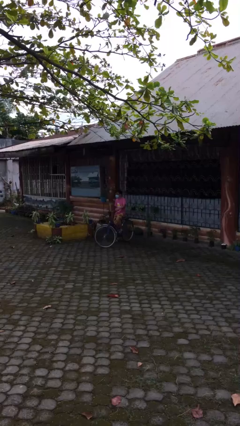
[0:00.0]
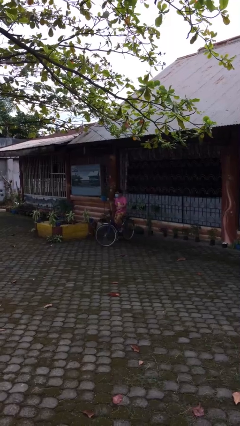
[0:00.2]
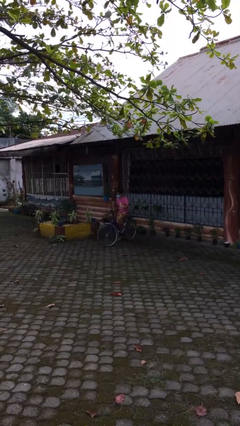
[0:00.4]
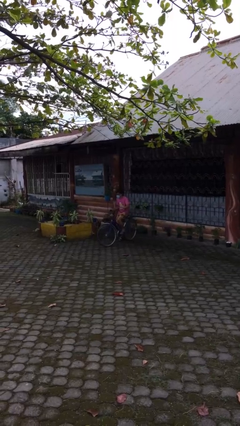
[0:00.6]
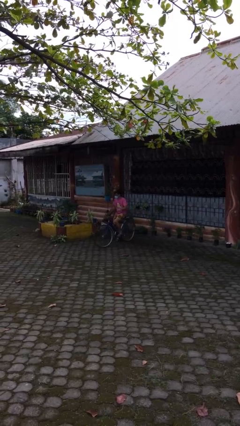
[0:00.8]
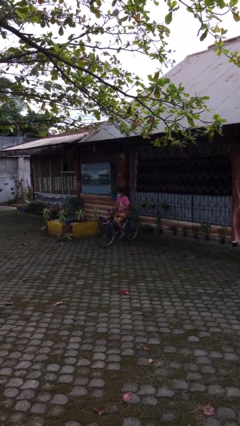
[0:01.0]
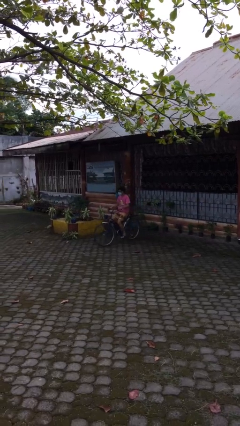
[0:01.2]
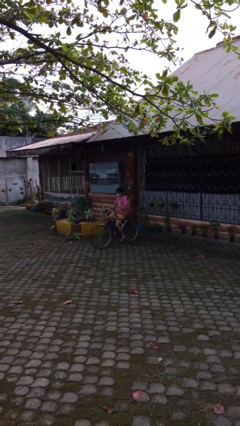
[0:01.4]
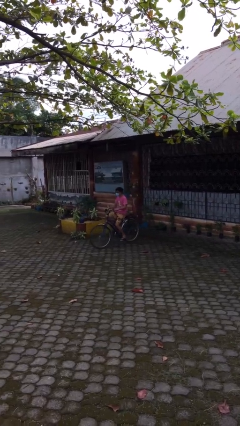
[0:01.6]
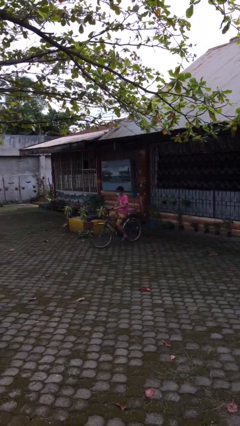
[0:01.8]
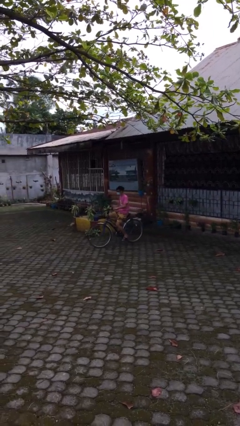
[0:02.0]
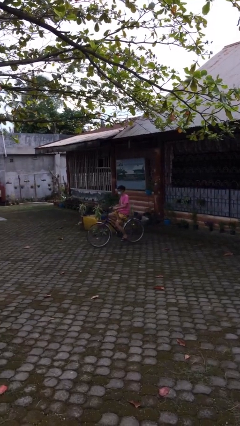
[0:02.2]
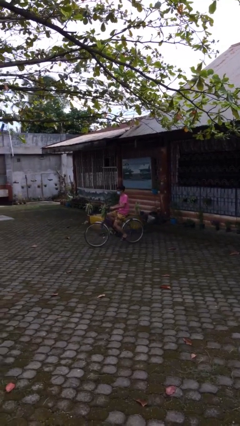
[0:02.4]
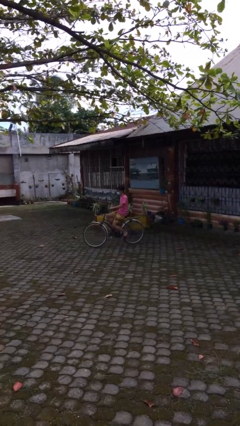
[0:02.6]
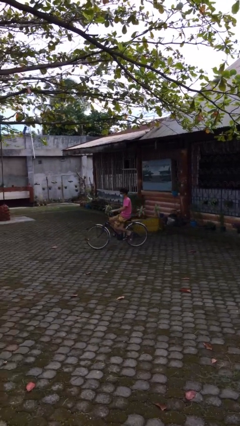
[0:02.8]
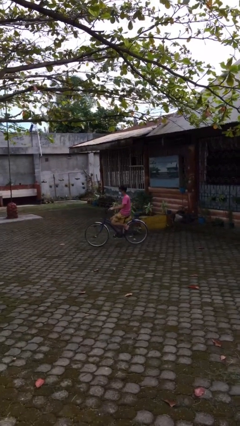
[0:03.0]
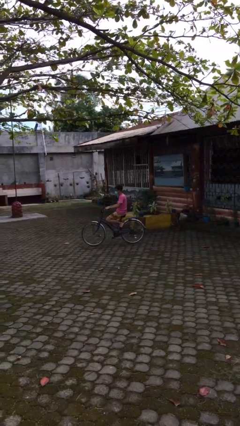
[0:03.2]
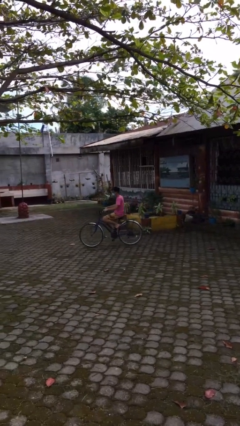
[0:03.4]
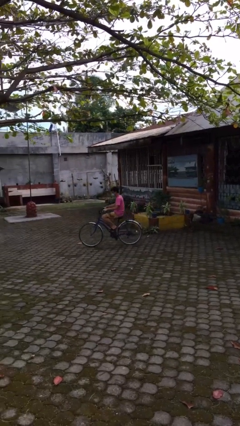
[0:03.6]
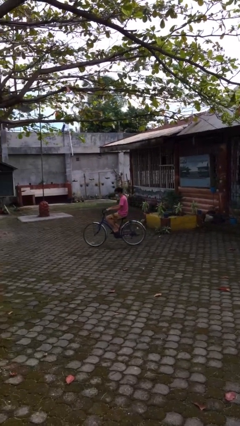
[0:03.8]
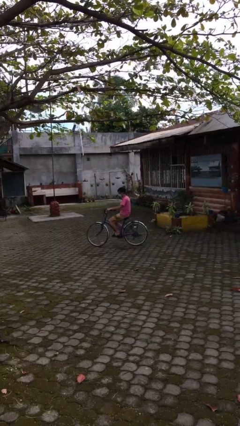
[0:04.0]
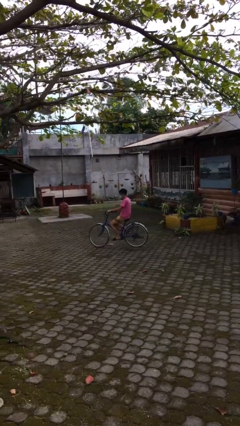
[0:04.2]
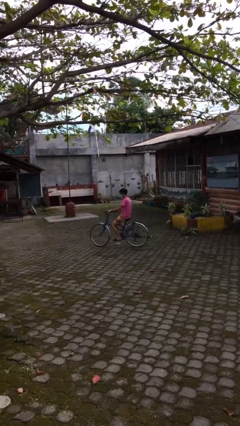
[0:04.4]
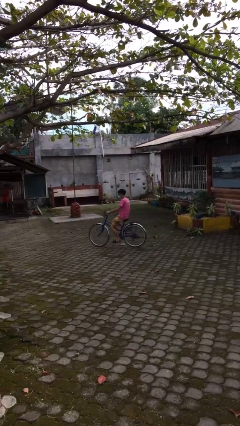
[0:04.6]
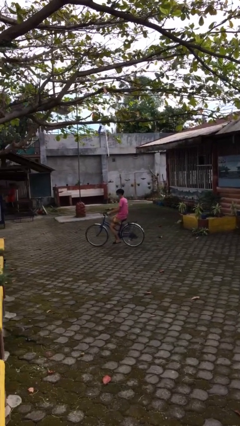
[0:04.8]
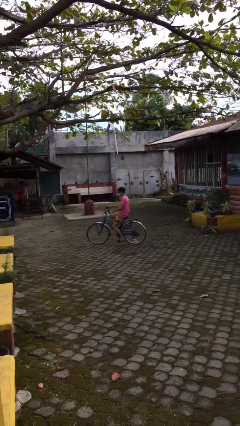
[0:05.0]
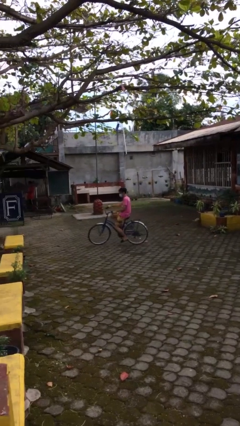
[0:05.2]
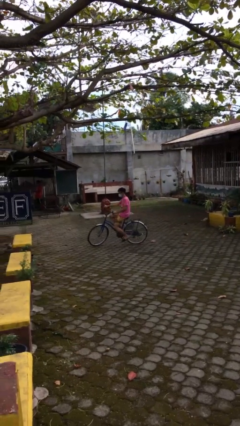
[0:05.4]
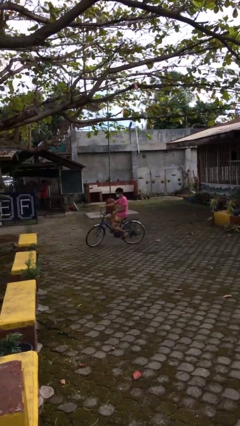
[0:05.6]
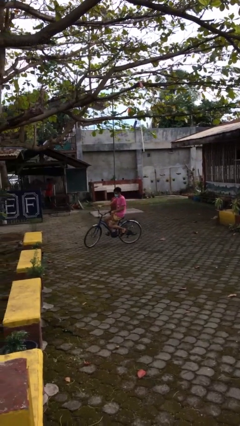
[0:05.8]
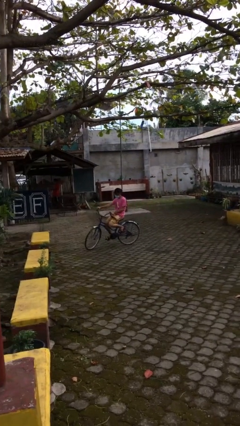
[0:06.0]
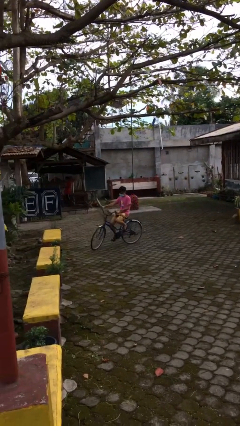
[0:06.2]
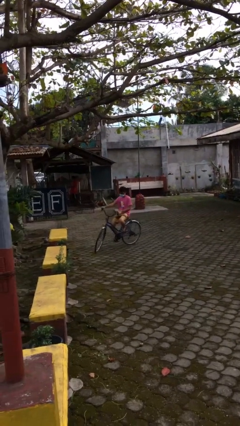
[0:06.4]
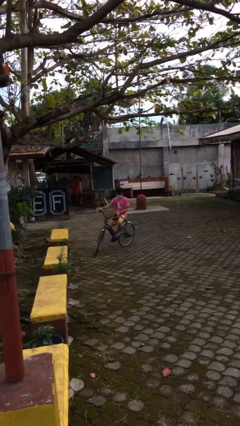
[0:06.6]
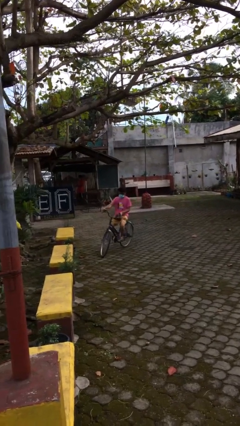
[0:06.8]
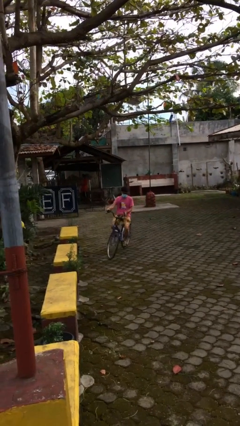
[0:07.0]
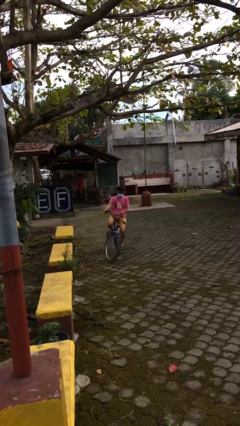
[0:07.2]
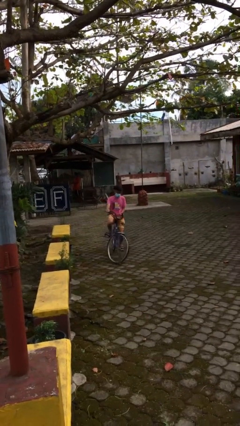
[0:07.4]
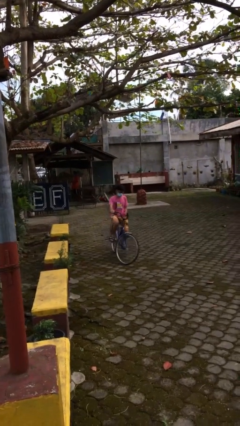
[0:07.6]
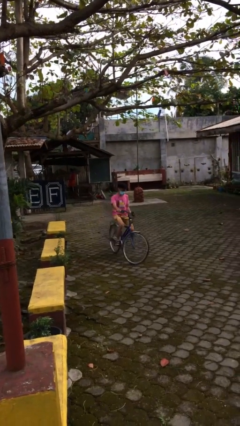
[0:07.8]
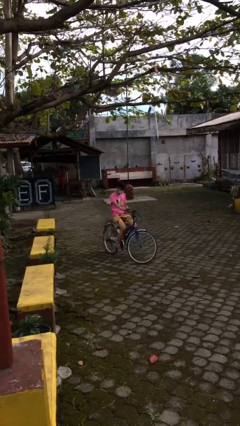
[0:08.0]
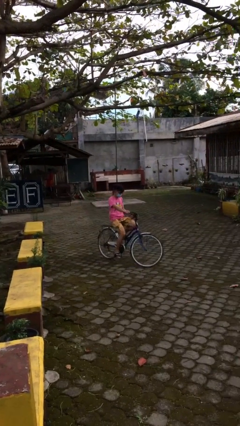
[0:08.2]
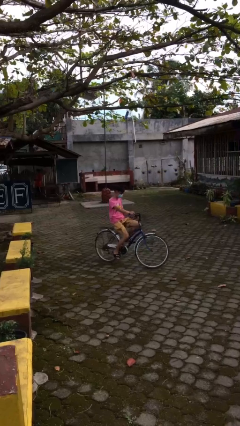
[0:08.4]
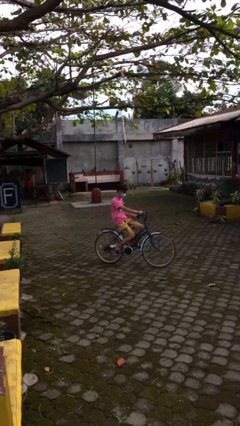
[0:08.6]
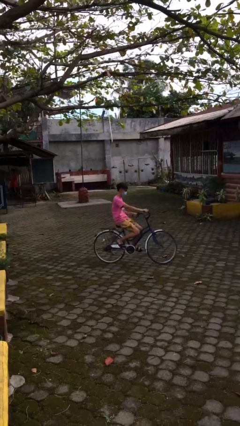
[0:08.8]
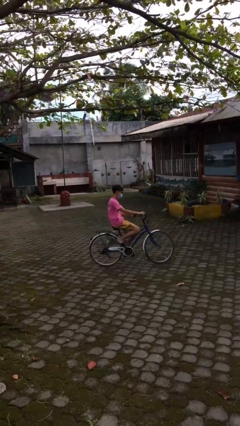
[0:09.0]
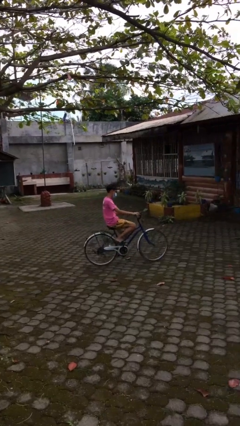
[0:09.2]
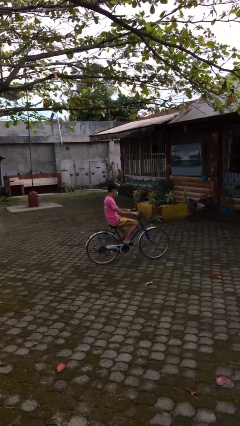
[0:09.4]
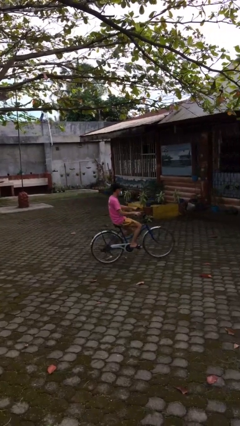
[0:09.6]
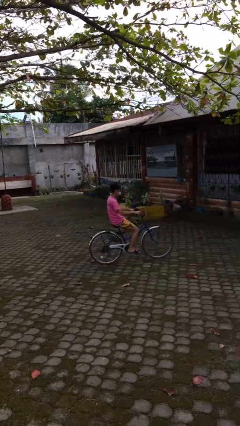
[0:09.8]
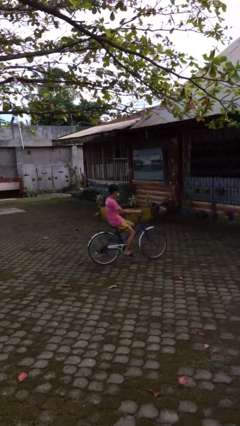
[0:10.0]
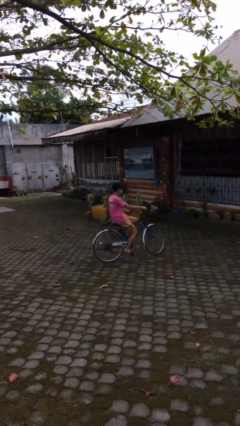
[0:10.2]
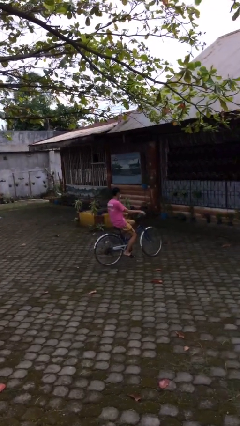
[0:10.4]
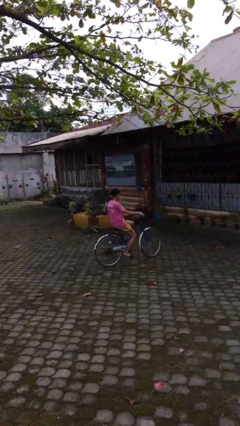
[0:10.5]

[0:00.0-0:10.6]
person rides bicycle

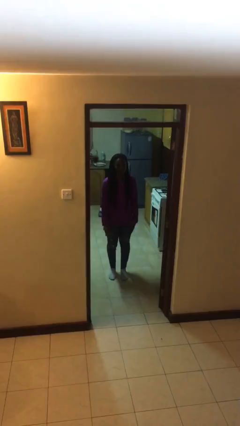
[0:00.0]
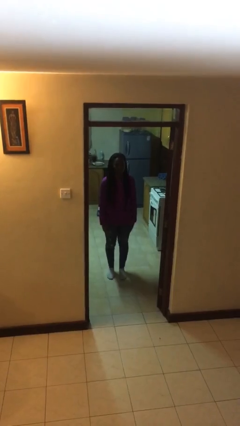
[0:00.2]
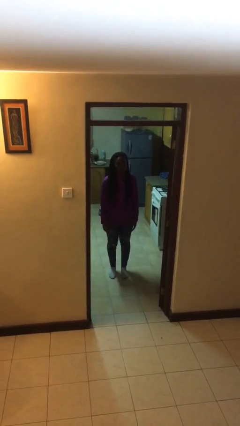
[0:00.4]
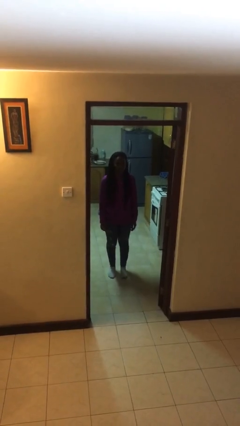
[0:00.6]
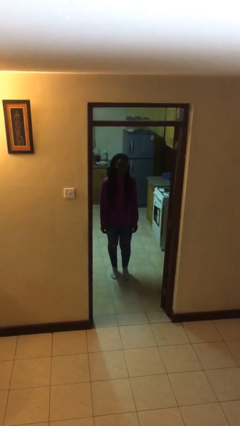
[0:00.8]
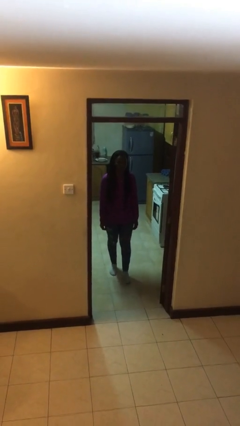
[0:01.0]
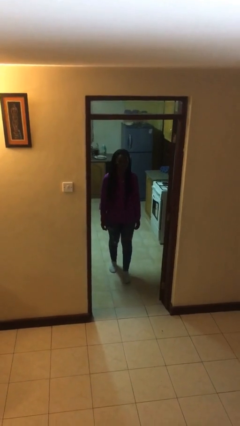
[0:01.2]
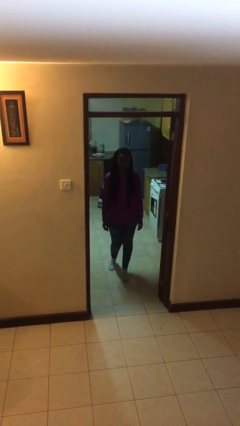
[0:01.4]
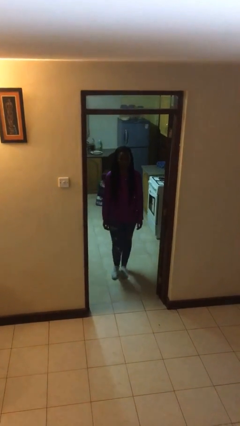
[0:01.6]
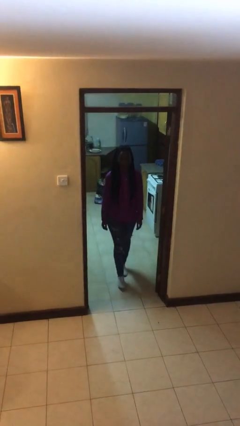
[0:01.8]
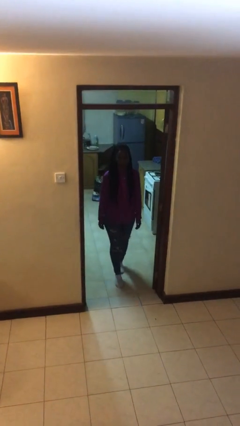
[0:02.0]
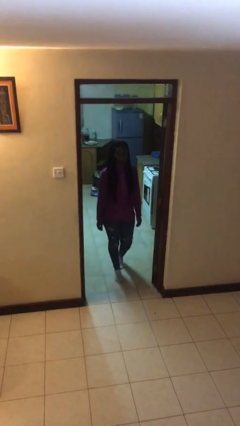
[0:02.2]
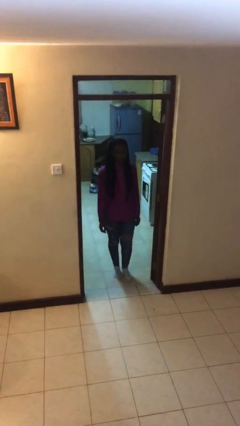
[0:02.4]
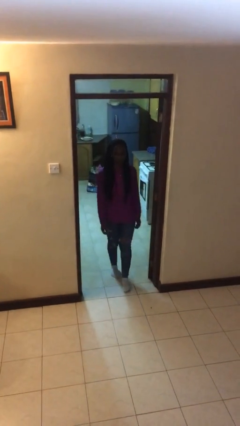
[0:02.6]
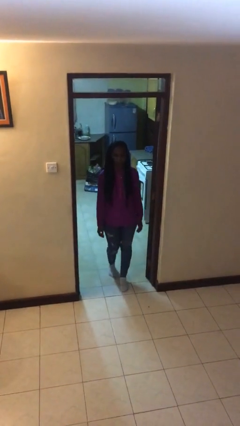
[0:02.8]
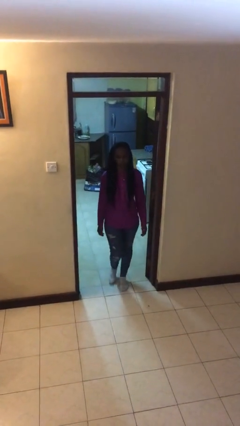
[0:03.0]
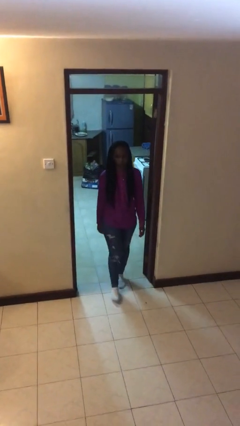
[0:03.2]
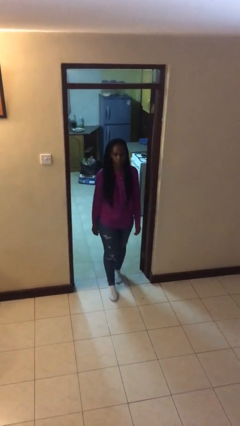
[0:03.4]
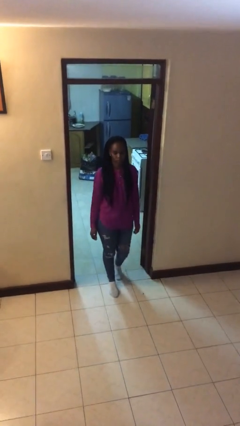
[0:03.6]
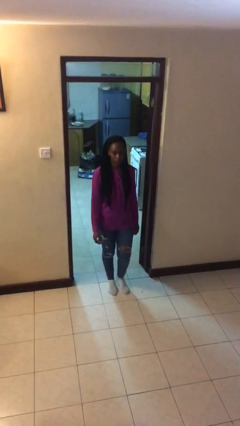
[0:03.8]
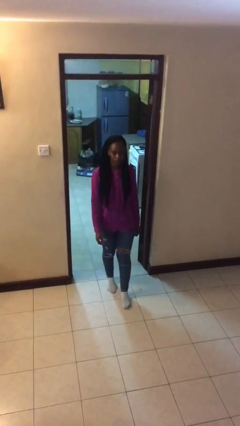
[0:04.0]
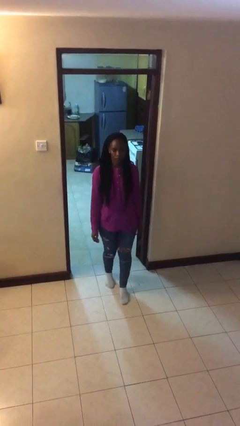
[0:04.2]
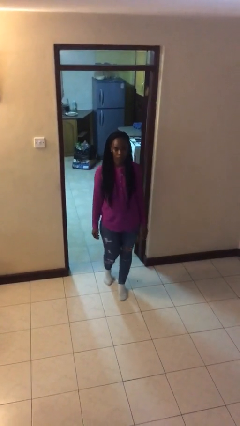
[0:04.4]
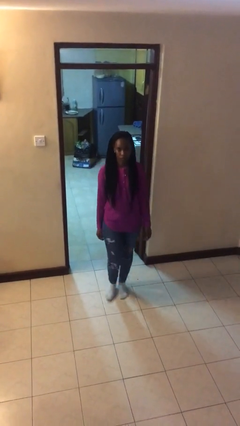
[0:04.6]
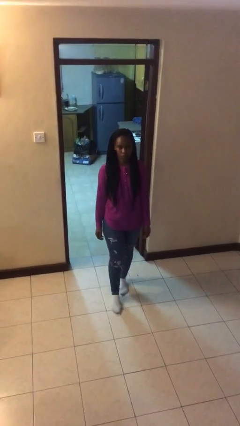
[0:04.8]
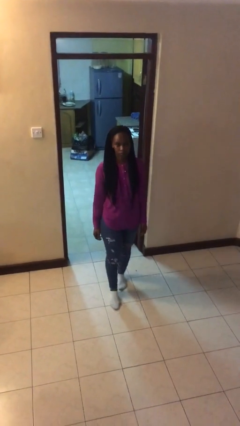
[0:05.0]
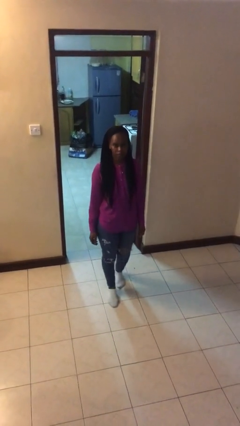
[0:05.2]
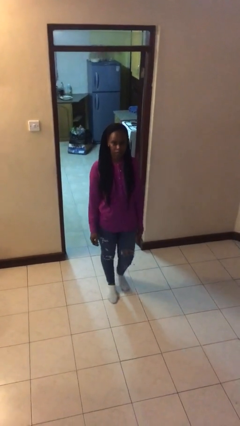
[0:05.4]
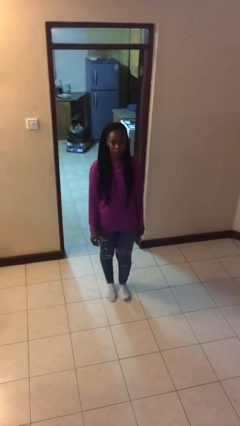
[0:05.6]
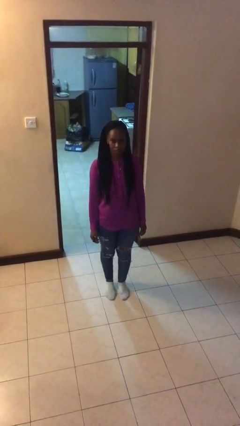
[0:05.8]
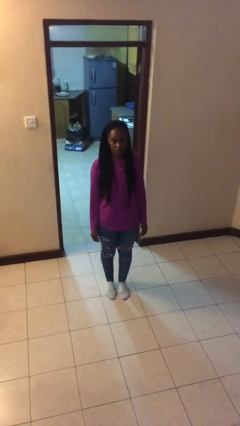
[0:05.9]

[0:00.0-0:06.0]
person enters scene through structure

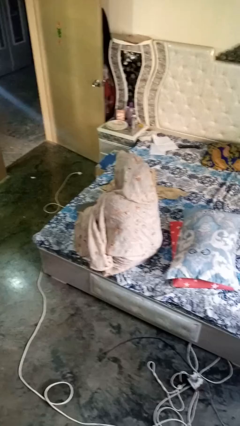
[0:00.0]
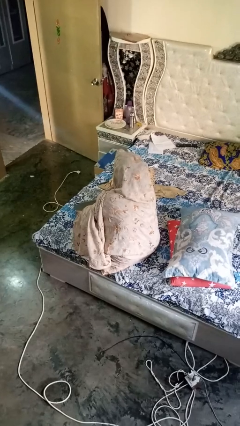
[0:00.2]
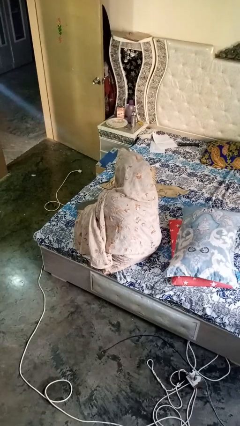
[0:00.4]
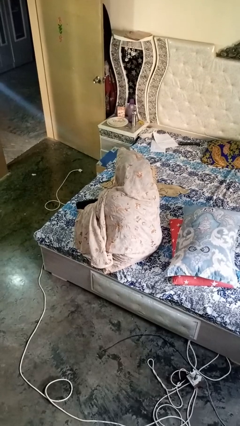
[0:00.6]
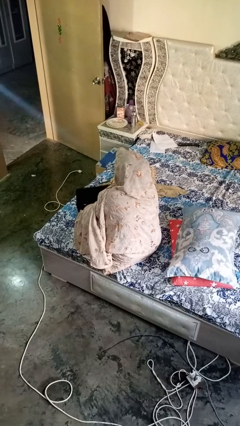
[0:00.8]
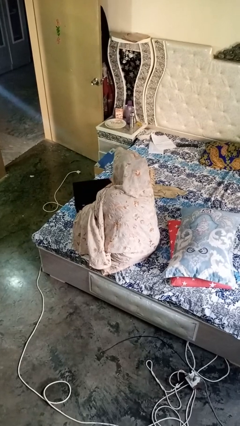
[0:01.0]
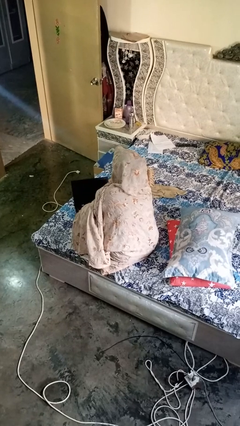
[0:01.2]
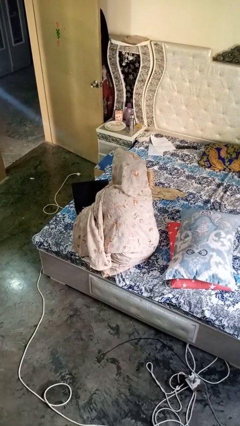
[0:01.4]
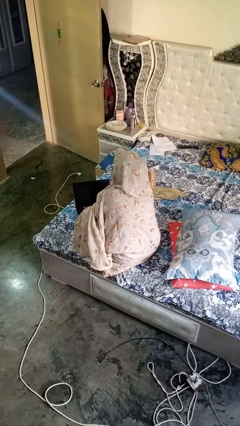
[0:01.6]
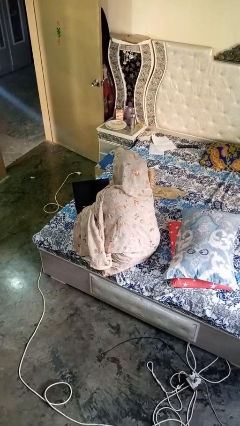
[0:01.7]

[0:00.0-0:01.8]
person opens laptop
